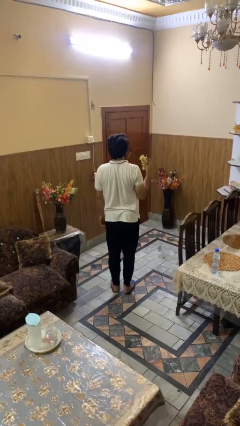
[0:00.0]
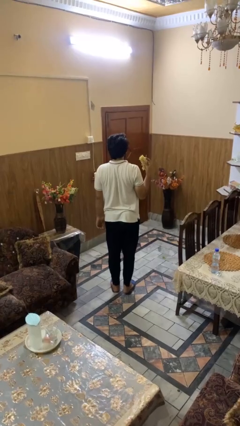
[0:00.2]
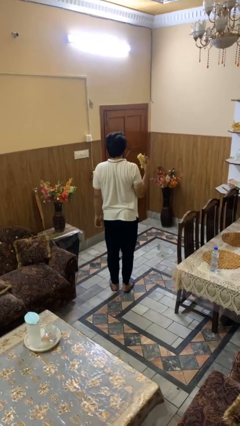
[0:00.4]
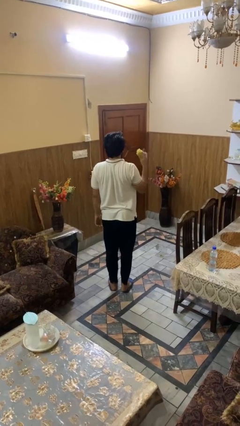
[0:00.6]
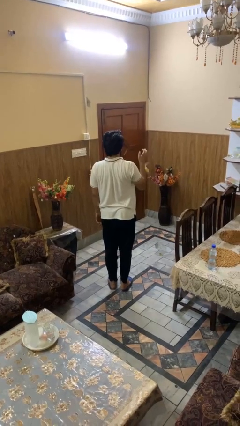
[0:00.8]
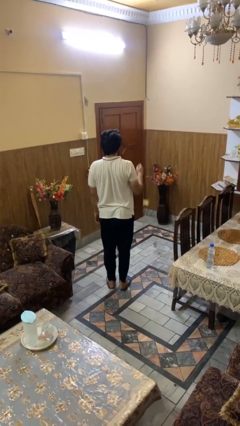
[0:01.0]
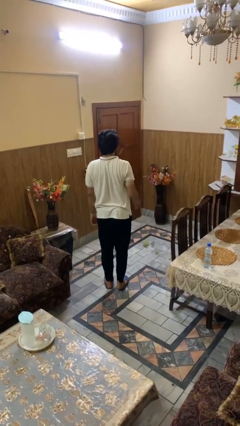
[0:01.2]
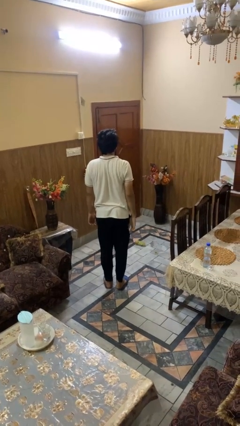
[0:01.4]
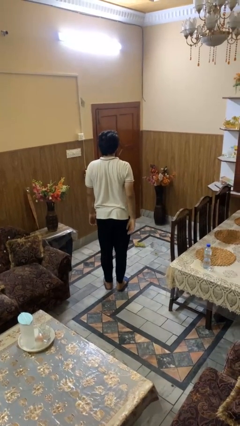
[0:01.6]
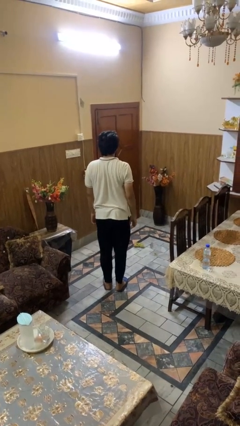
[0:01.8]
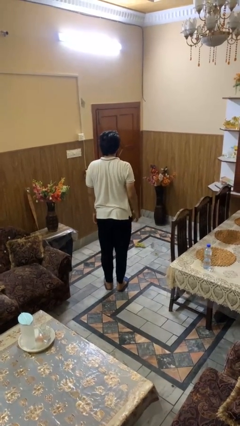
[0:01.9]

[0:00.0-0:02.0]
person throws object to ground

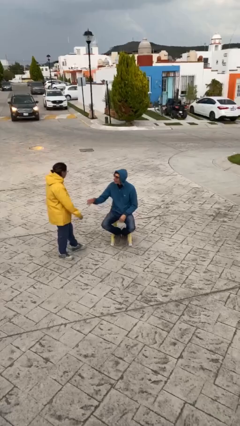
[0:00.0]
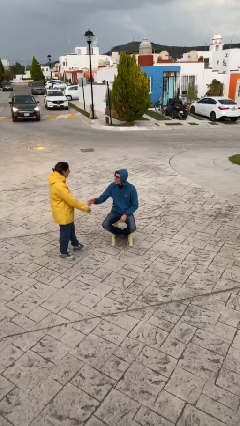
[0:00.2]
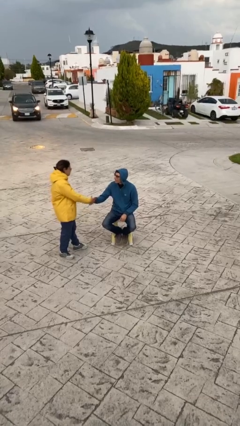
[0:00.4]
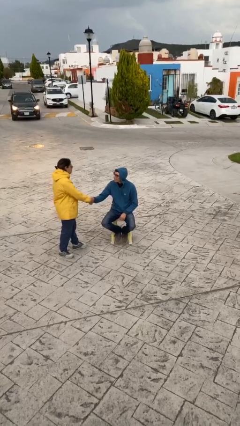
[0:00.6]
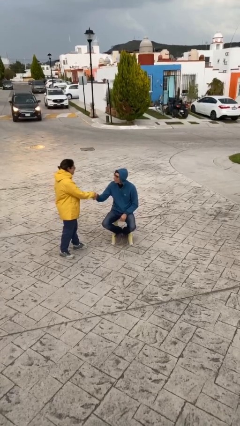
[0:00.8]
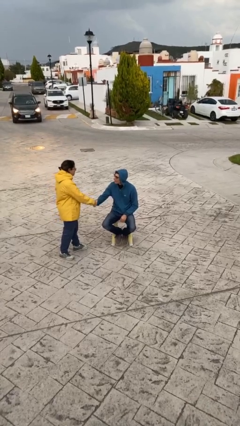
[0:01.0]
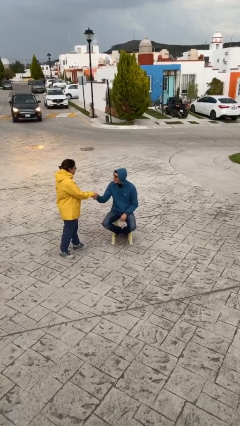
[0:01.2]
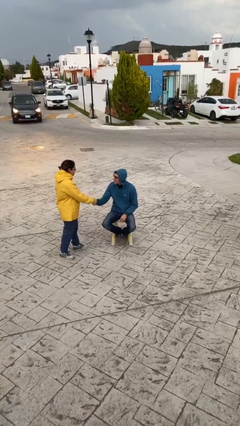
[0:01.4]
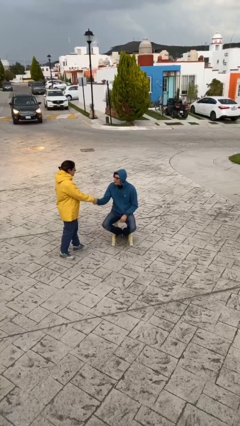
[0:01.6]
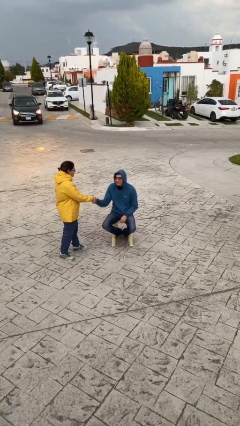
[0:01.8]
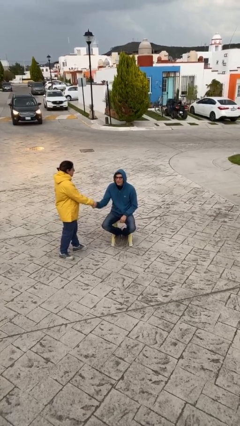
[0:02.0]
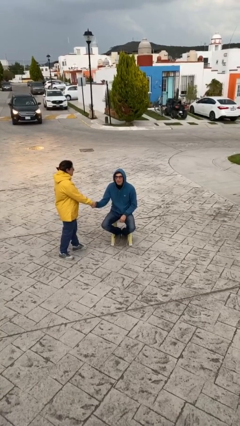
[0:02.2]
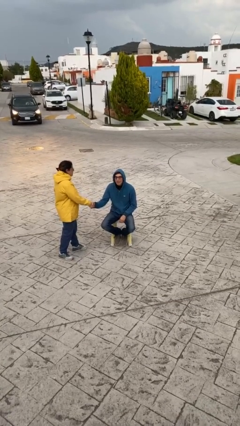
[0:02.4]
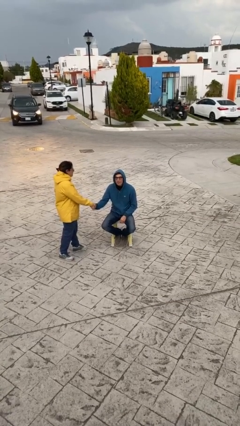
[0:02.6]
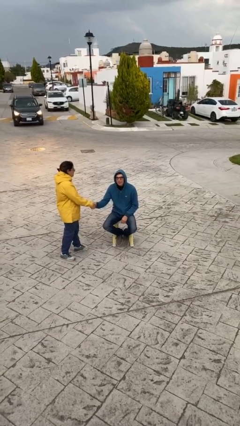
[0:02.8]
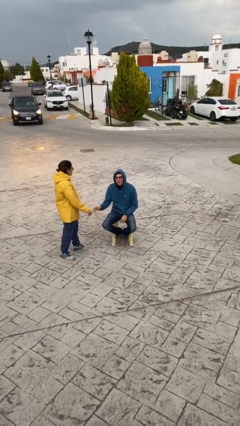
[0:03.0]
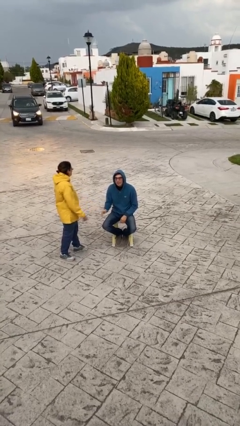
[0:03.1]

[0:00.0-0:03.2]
person shakes hand

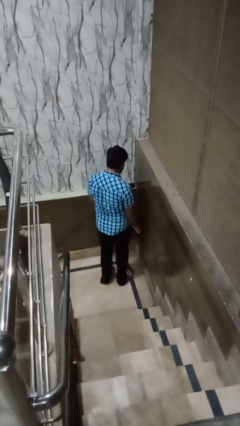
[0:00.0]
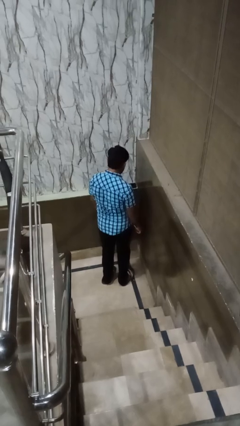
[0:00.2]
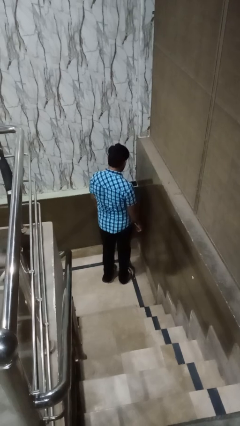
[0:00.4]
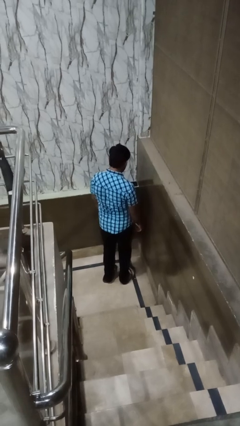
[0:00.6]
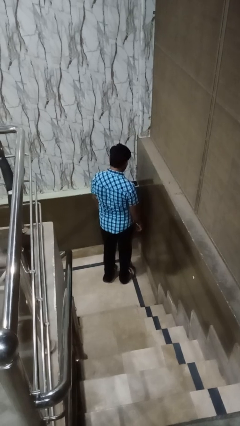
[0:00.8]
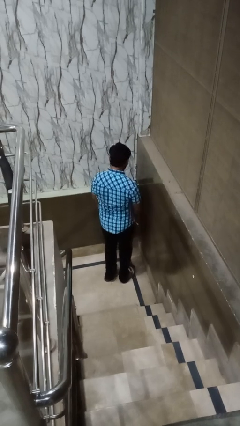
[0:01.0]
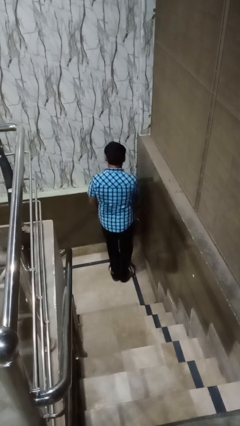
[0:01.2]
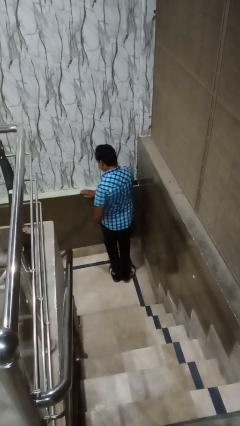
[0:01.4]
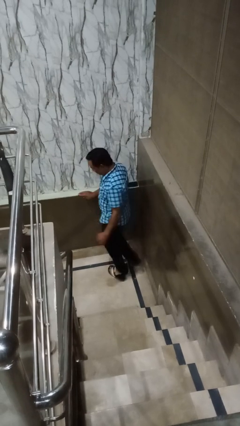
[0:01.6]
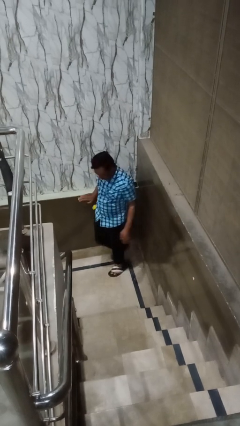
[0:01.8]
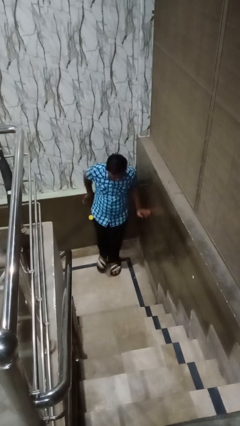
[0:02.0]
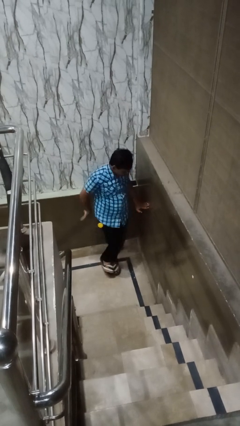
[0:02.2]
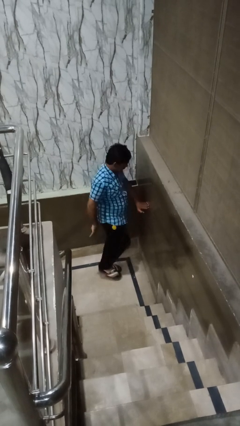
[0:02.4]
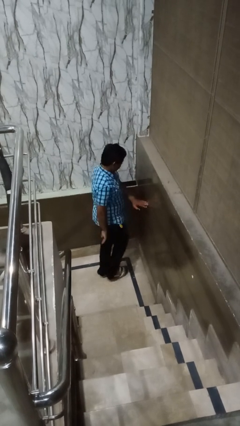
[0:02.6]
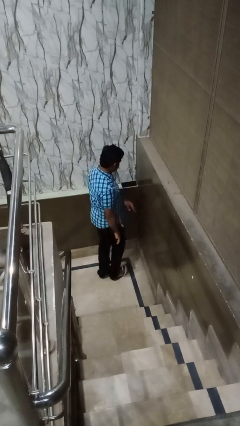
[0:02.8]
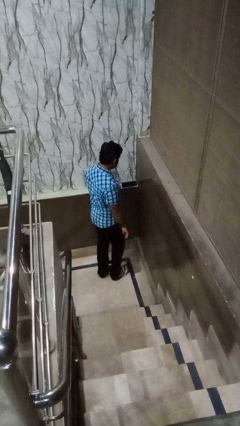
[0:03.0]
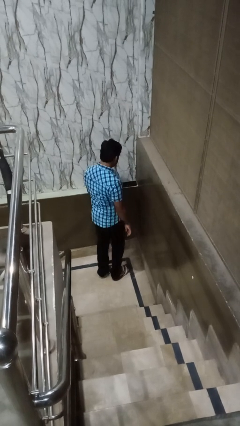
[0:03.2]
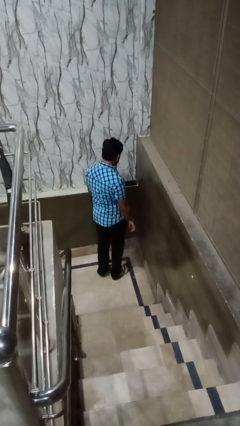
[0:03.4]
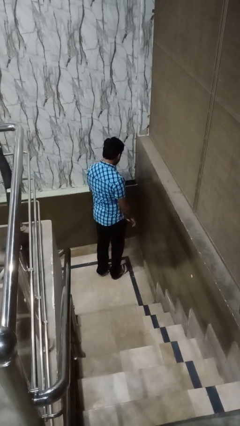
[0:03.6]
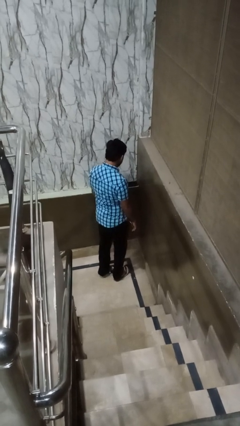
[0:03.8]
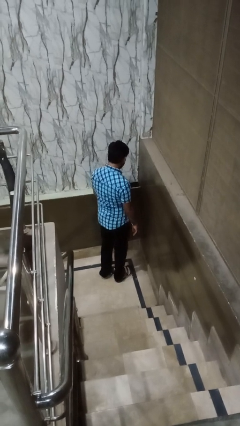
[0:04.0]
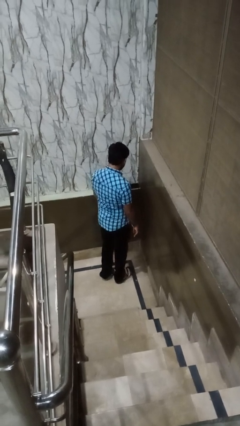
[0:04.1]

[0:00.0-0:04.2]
person twirls

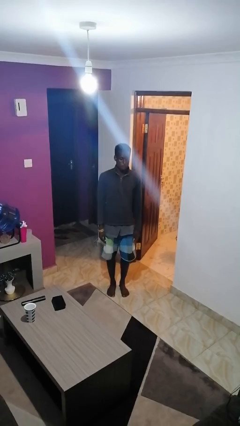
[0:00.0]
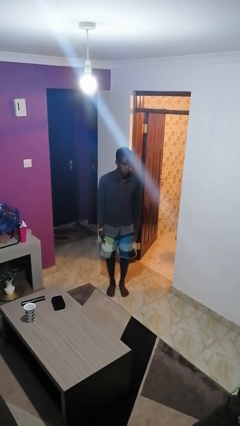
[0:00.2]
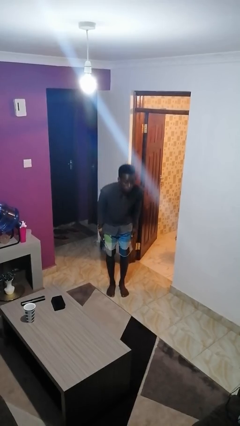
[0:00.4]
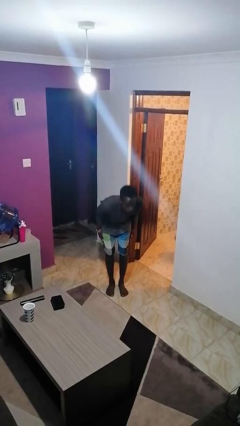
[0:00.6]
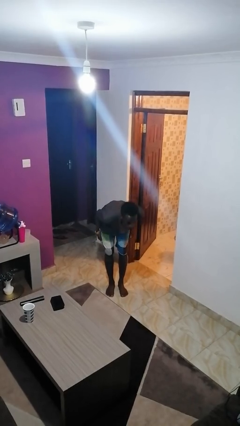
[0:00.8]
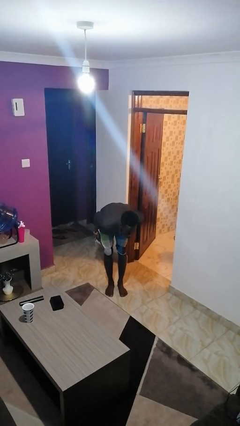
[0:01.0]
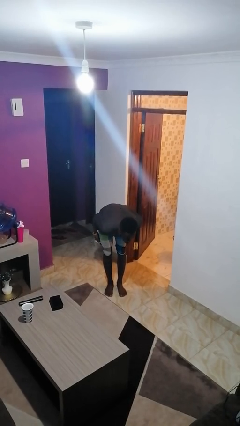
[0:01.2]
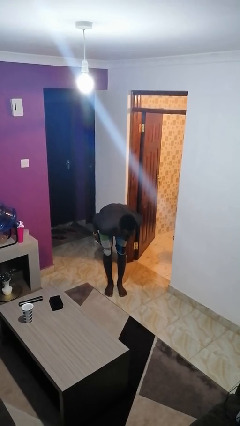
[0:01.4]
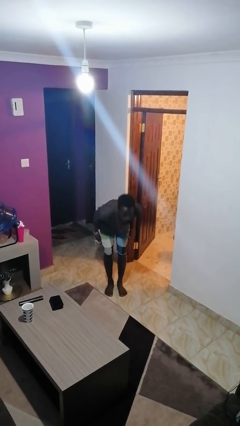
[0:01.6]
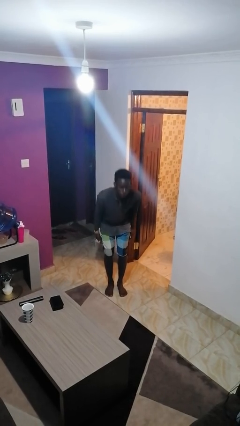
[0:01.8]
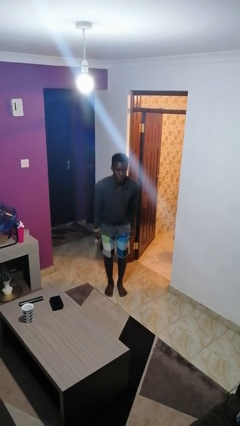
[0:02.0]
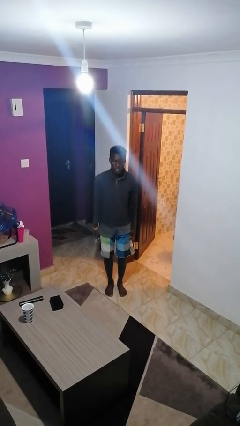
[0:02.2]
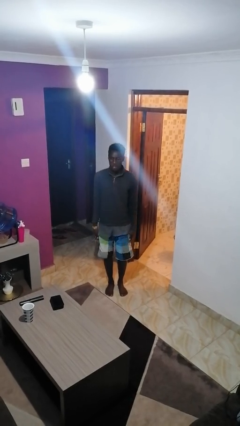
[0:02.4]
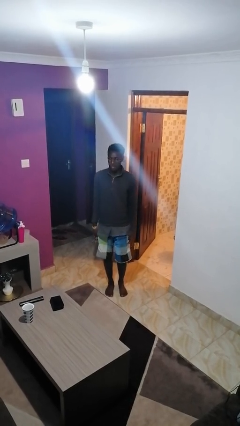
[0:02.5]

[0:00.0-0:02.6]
person bows

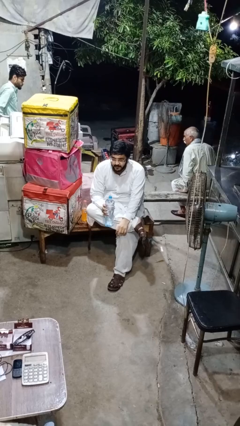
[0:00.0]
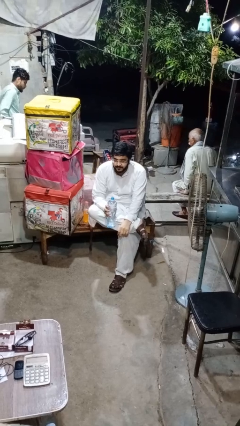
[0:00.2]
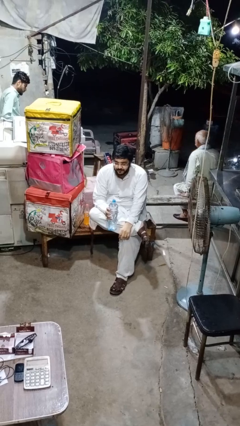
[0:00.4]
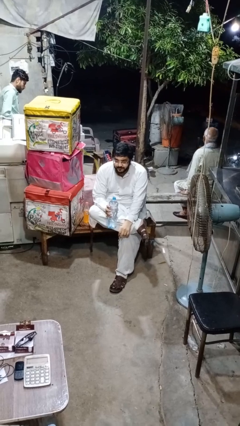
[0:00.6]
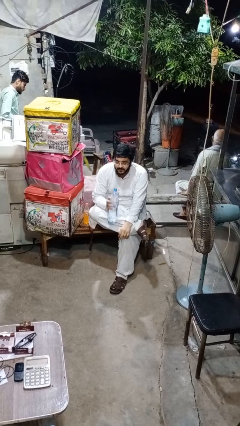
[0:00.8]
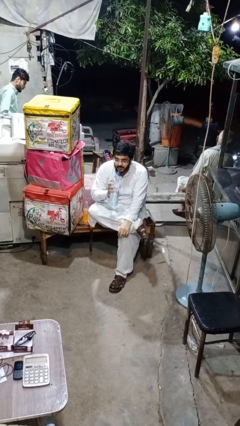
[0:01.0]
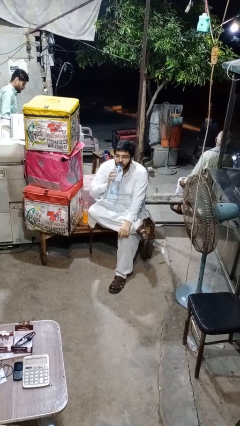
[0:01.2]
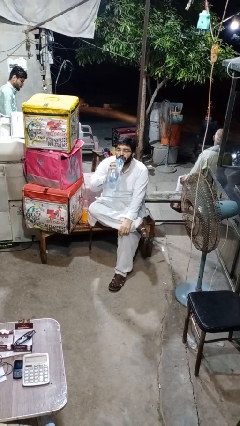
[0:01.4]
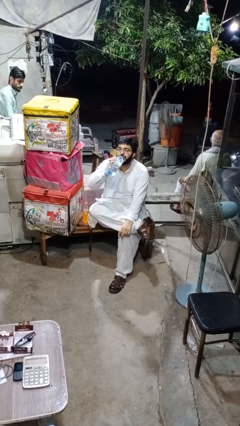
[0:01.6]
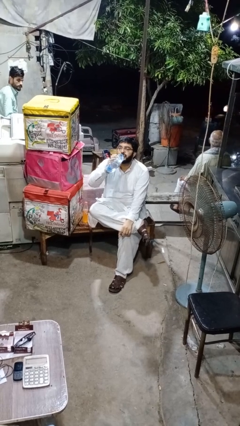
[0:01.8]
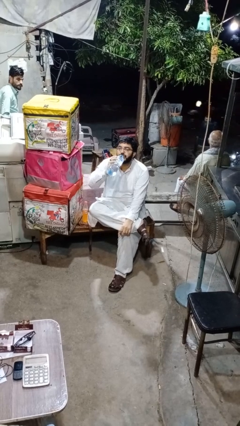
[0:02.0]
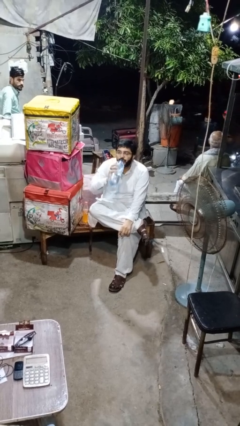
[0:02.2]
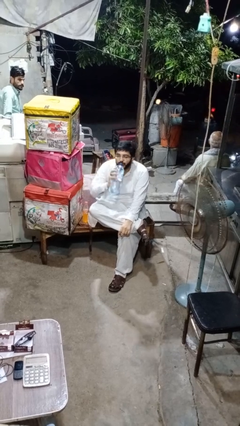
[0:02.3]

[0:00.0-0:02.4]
person drinks from bottle

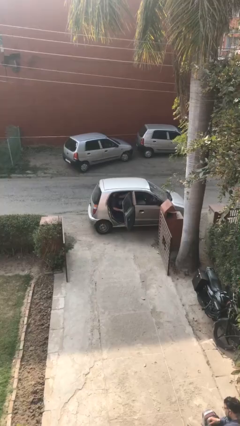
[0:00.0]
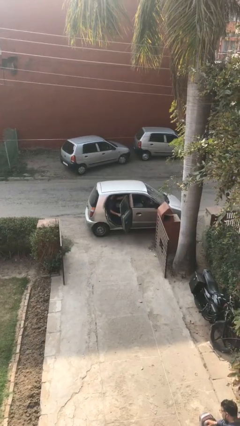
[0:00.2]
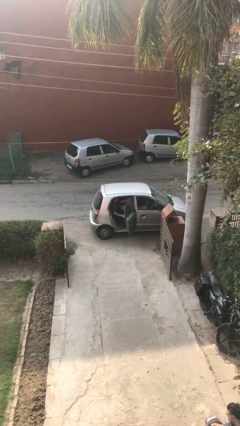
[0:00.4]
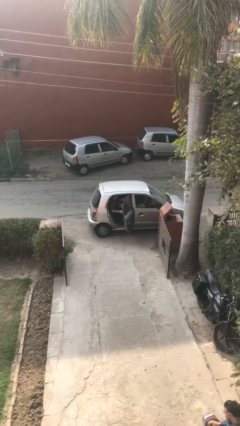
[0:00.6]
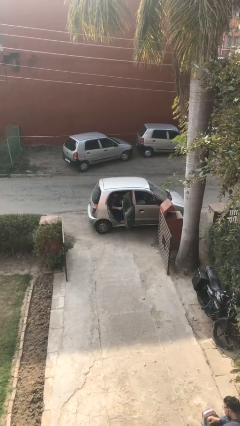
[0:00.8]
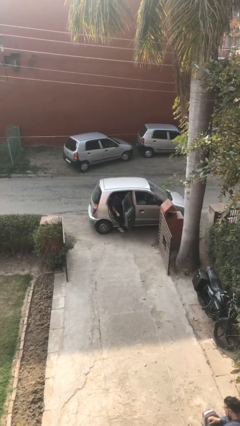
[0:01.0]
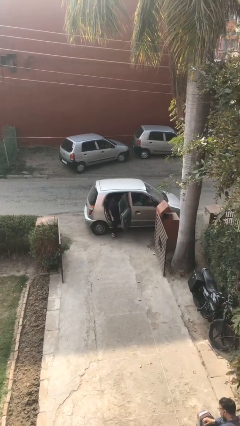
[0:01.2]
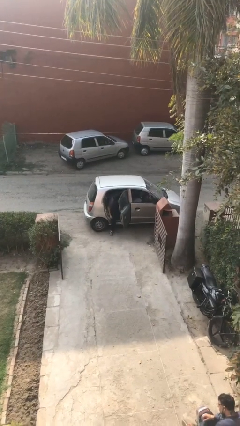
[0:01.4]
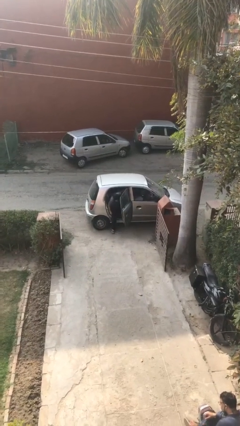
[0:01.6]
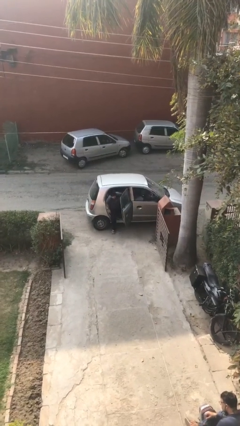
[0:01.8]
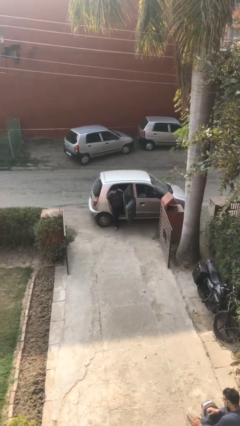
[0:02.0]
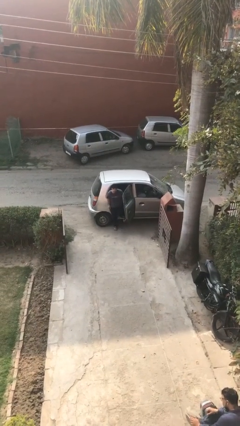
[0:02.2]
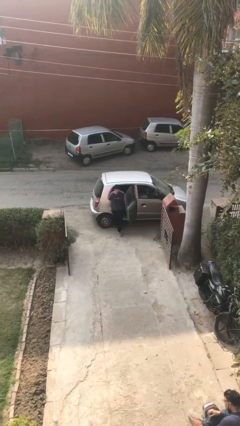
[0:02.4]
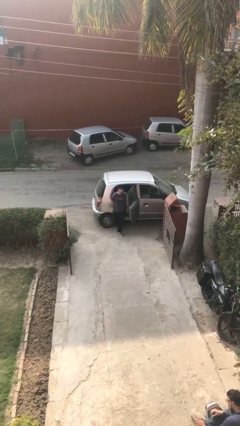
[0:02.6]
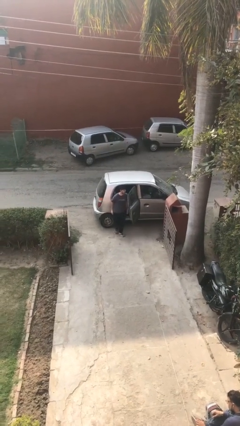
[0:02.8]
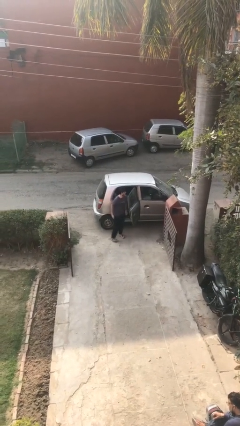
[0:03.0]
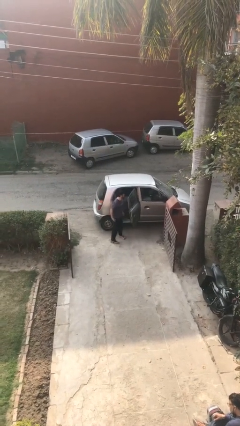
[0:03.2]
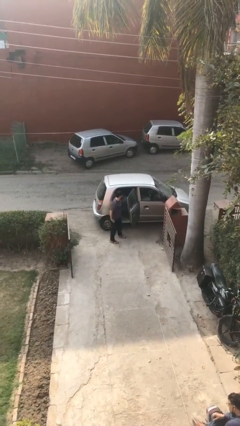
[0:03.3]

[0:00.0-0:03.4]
person exits car
